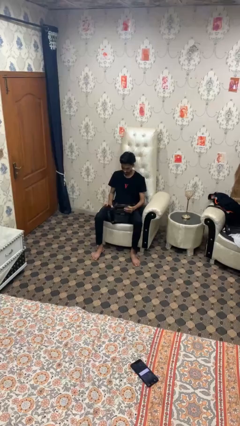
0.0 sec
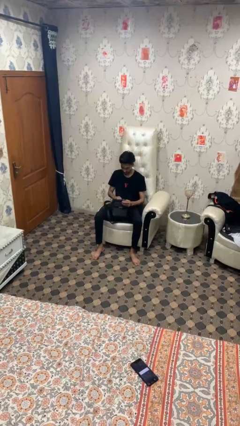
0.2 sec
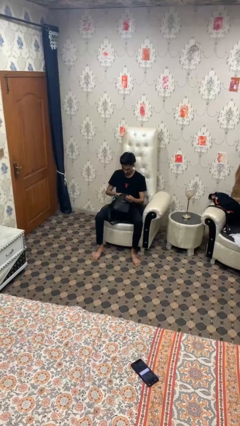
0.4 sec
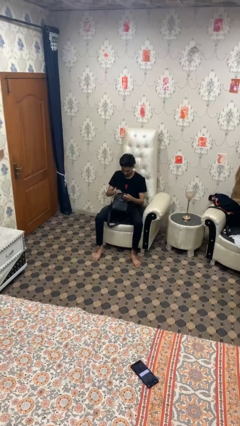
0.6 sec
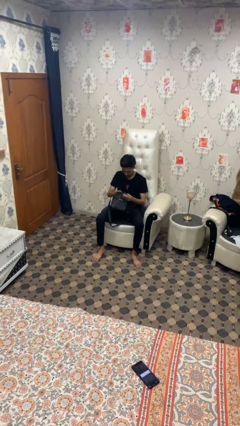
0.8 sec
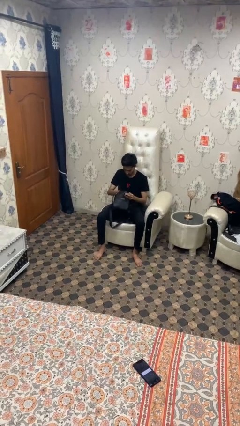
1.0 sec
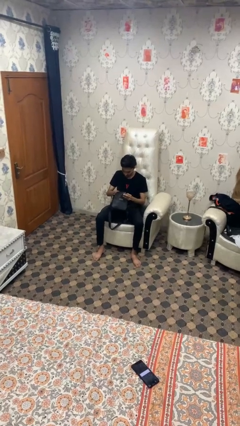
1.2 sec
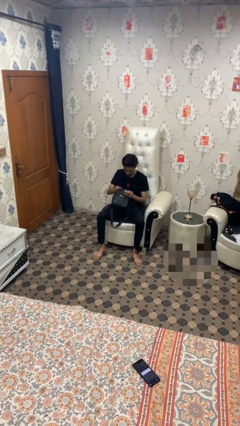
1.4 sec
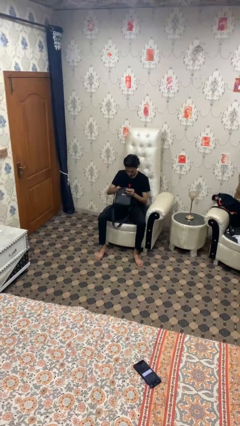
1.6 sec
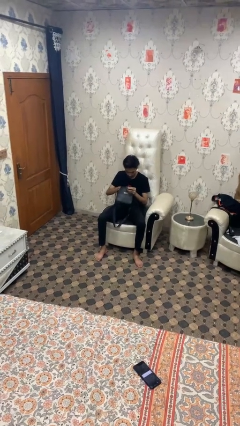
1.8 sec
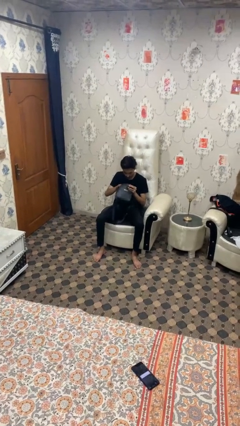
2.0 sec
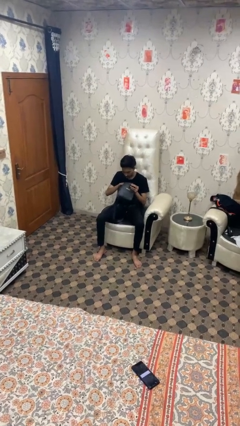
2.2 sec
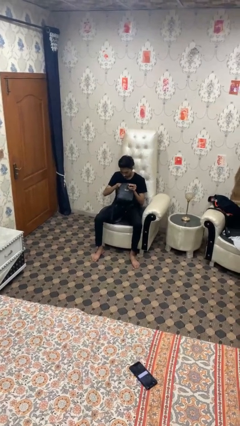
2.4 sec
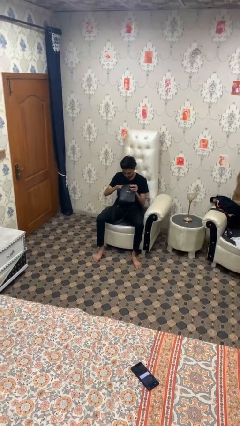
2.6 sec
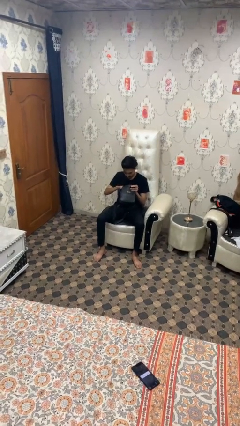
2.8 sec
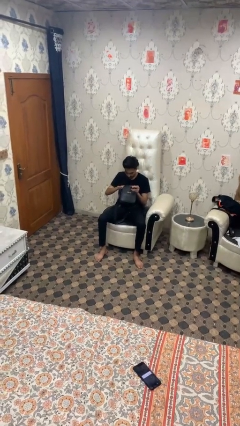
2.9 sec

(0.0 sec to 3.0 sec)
person searches in bag

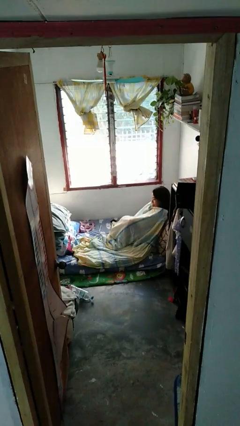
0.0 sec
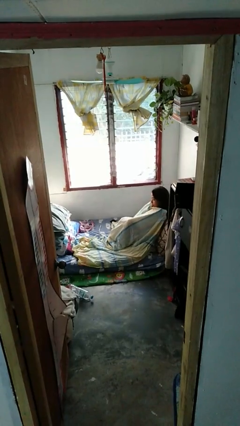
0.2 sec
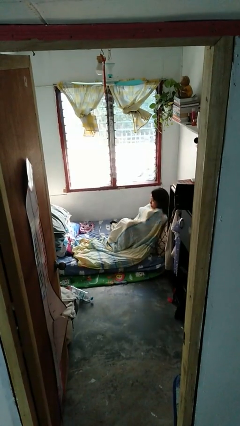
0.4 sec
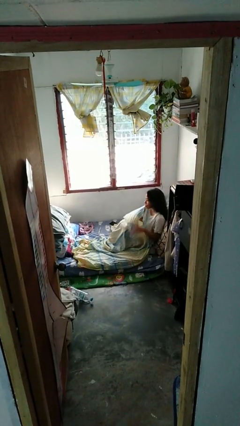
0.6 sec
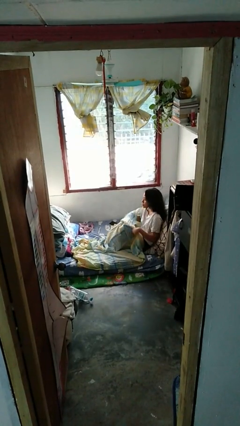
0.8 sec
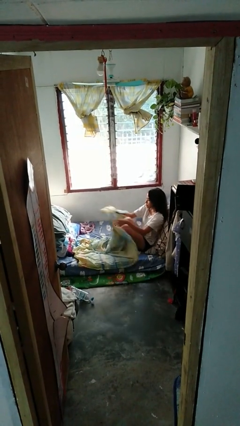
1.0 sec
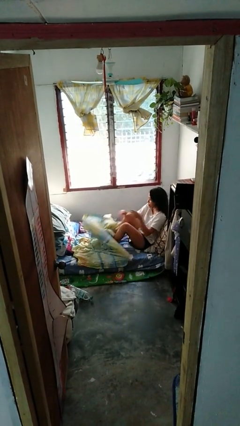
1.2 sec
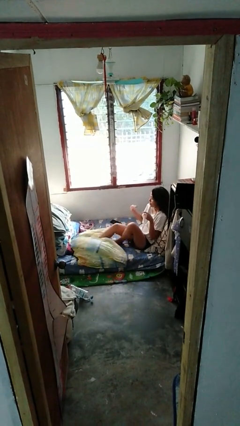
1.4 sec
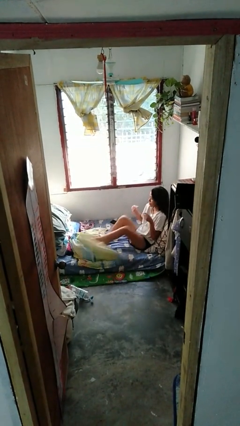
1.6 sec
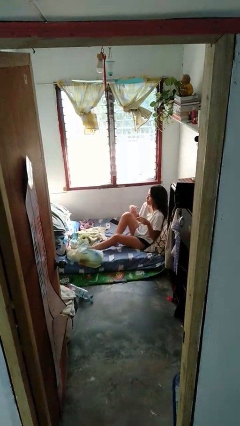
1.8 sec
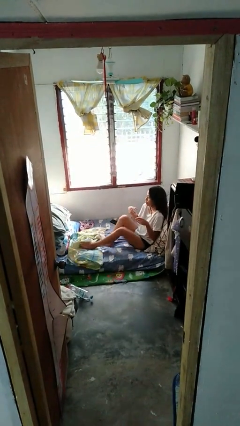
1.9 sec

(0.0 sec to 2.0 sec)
person uncovers with bedsheets

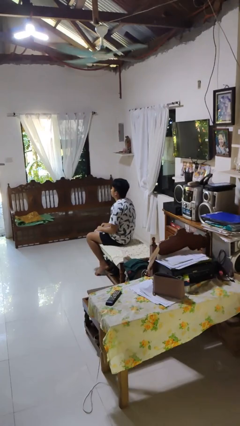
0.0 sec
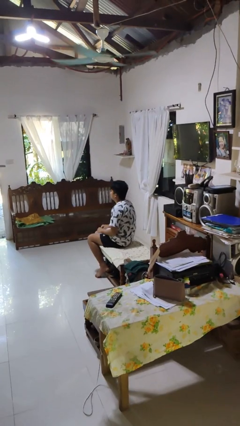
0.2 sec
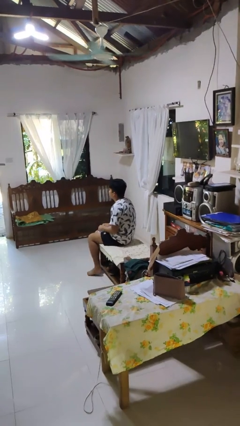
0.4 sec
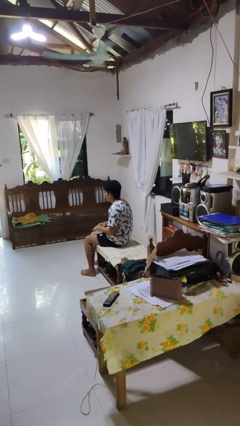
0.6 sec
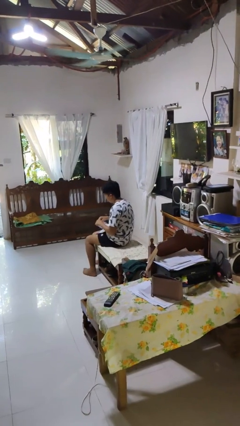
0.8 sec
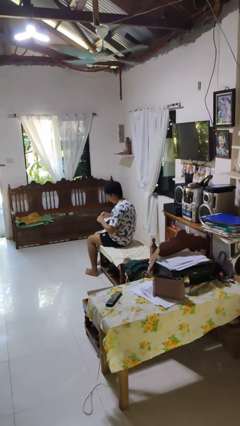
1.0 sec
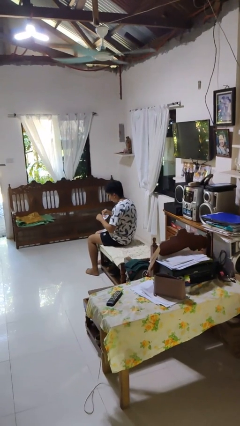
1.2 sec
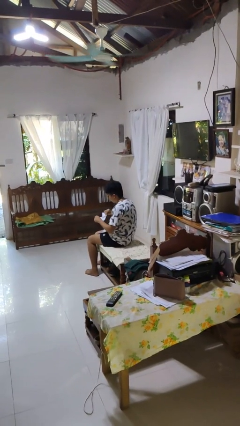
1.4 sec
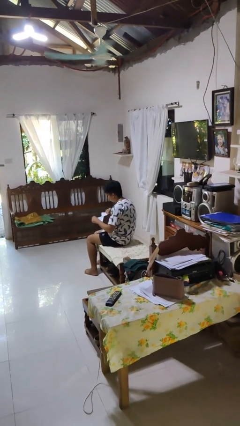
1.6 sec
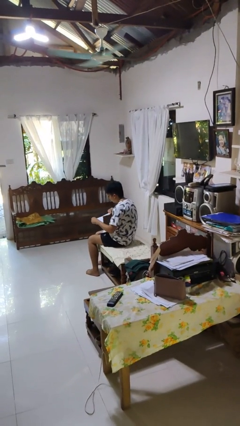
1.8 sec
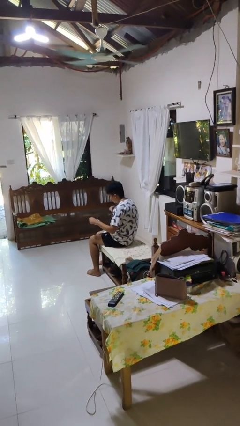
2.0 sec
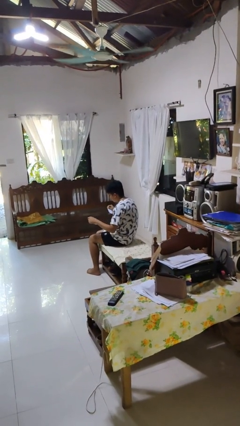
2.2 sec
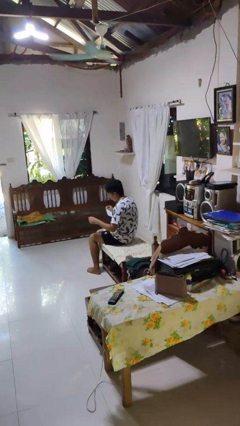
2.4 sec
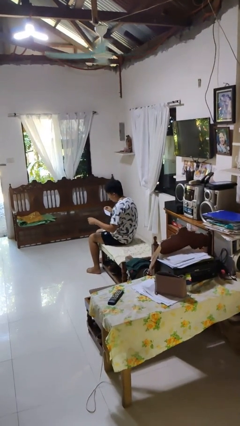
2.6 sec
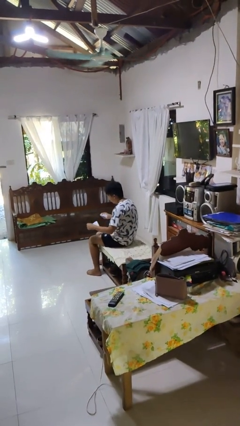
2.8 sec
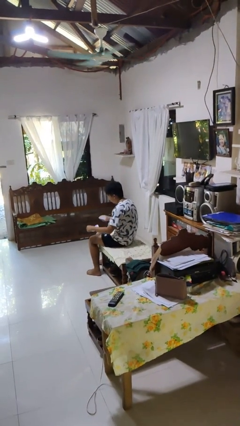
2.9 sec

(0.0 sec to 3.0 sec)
person tears paper

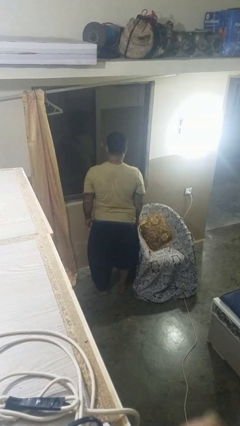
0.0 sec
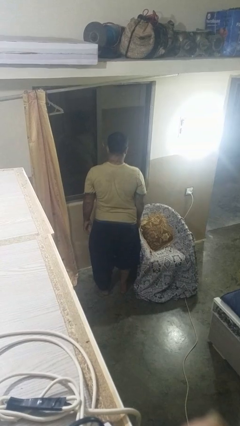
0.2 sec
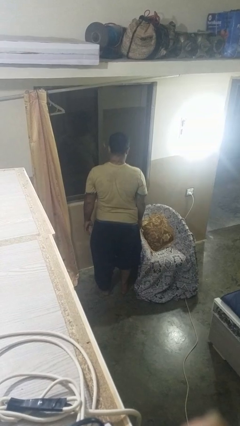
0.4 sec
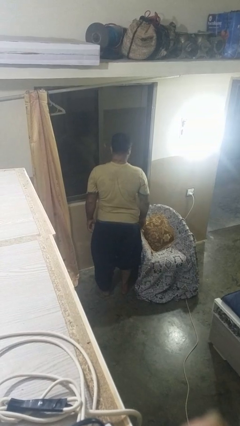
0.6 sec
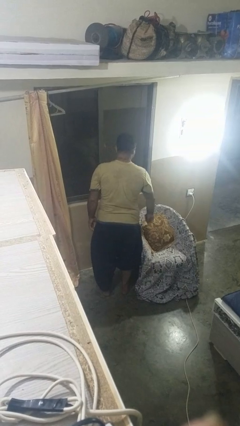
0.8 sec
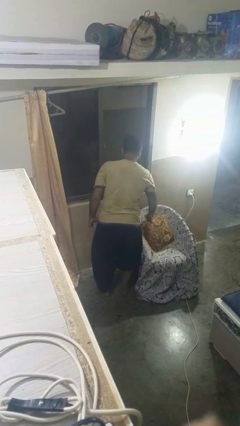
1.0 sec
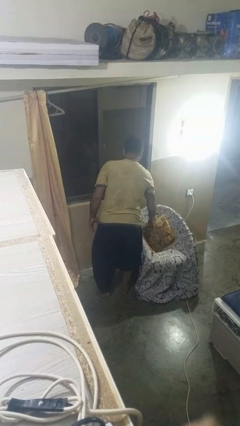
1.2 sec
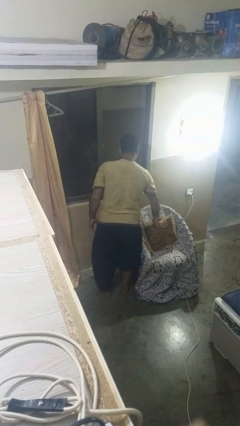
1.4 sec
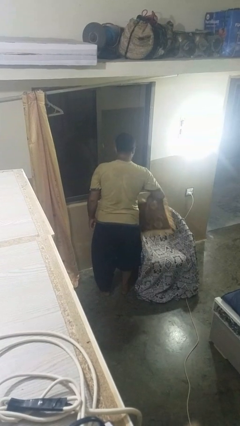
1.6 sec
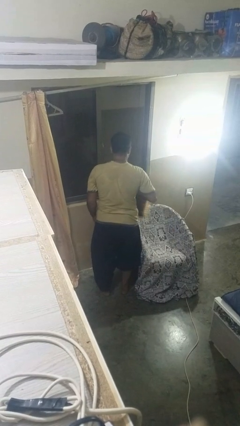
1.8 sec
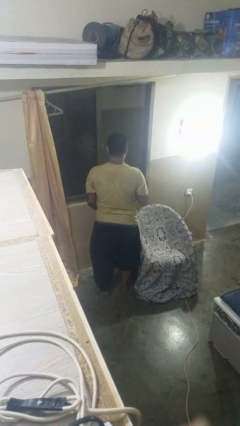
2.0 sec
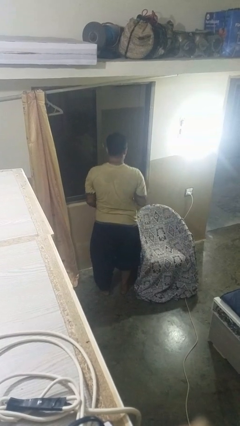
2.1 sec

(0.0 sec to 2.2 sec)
person picks up object from couch

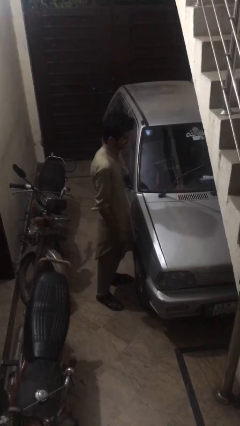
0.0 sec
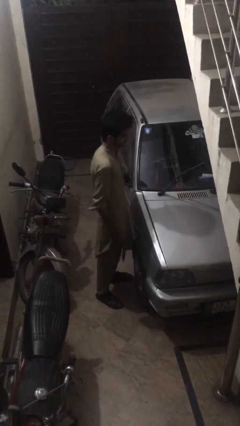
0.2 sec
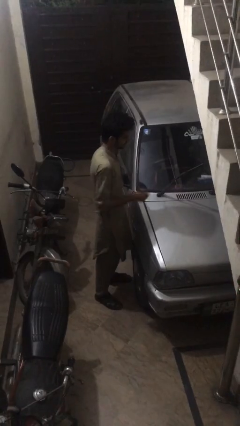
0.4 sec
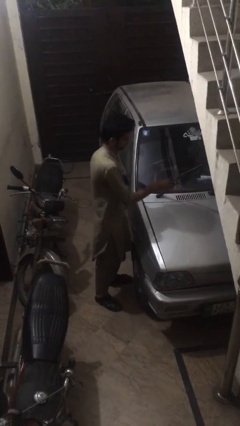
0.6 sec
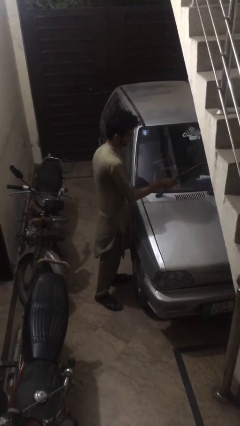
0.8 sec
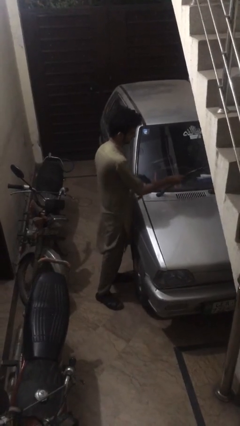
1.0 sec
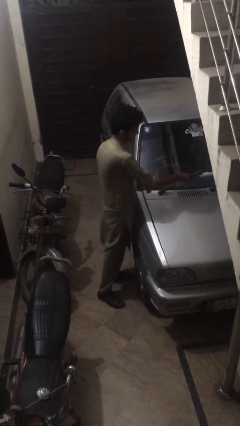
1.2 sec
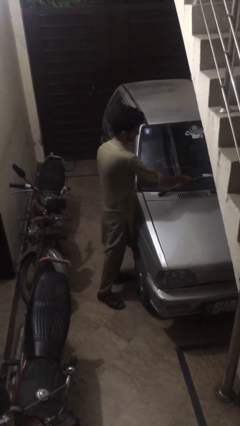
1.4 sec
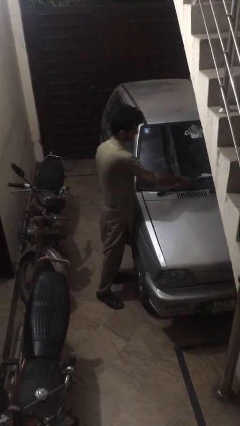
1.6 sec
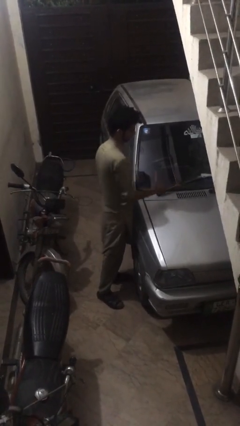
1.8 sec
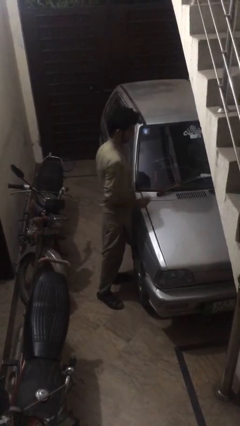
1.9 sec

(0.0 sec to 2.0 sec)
person flips down car wipers

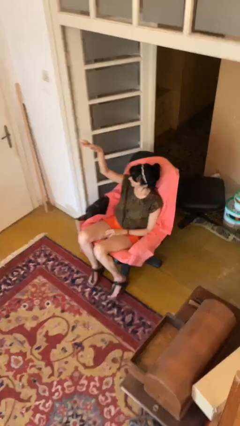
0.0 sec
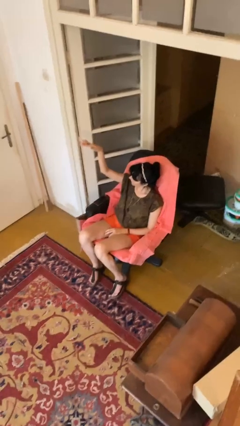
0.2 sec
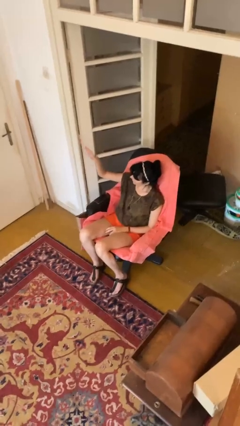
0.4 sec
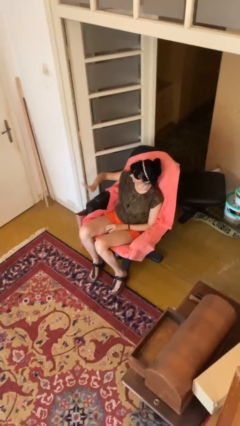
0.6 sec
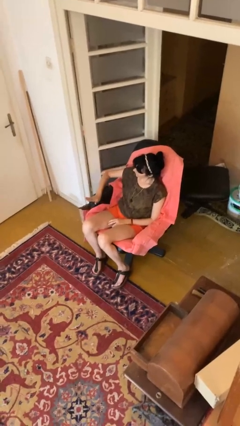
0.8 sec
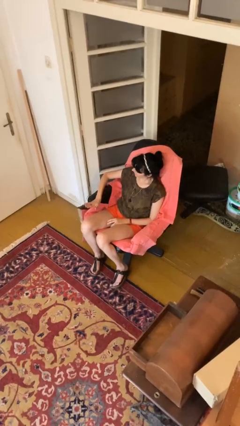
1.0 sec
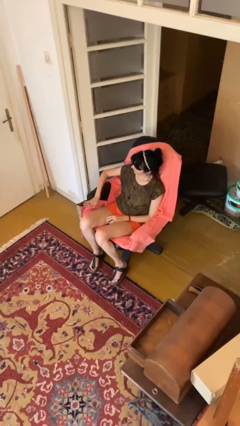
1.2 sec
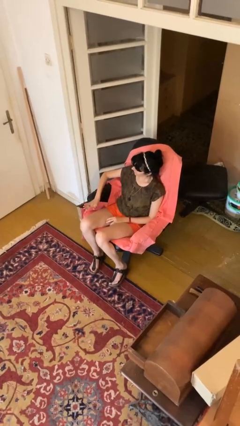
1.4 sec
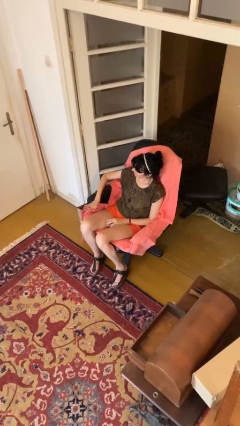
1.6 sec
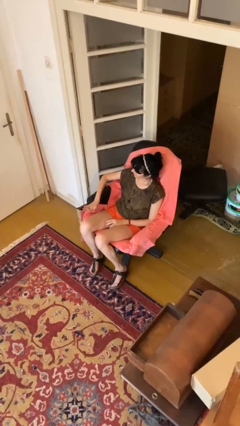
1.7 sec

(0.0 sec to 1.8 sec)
person gestures swipe down

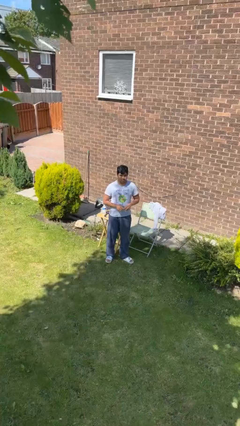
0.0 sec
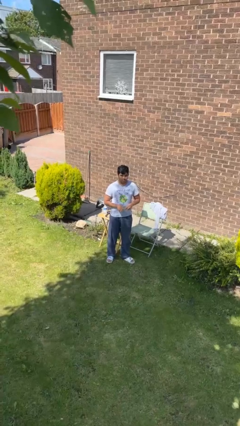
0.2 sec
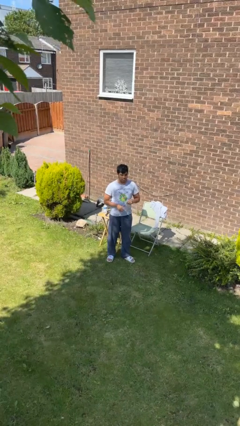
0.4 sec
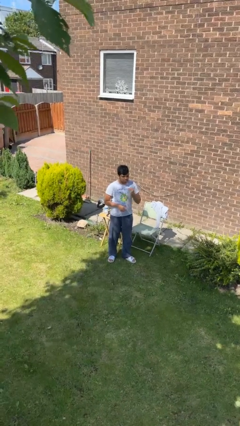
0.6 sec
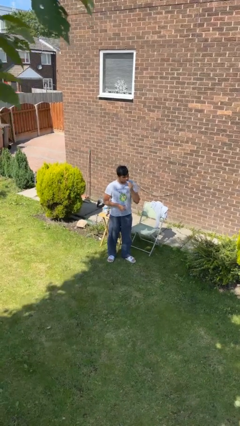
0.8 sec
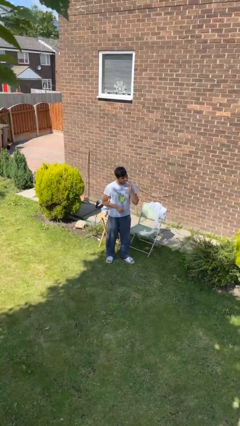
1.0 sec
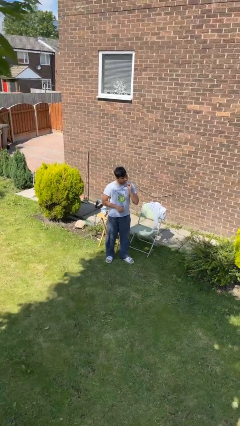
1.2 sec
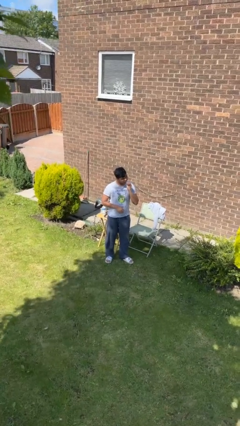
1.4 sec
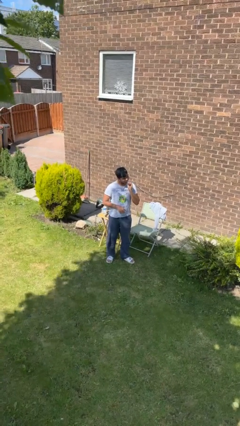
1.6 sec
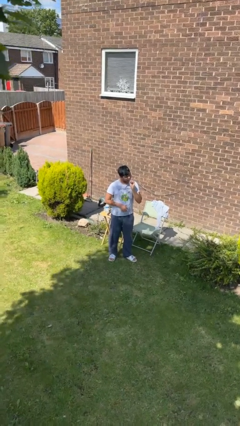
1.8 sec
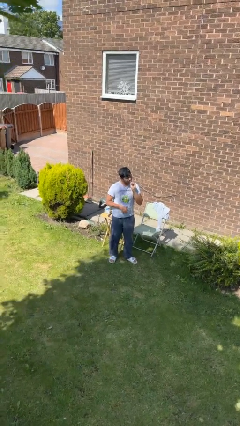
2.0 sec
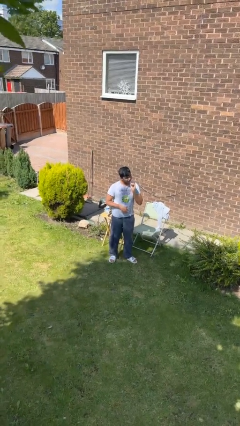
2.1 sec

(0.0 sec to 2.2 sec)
person flosses

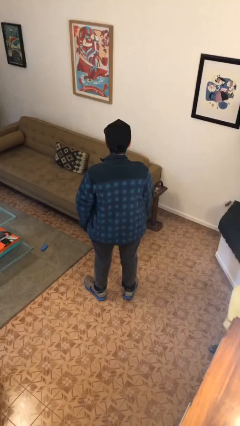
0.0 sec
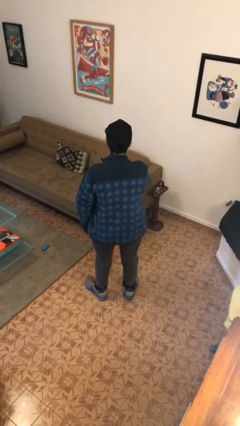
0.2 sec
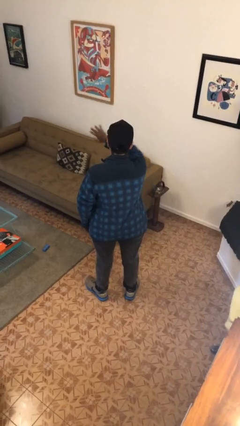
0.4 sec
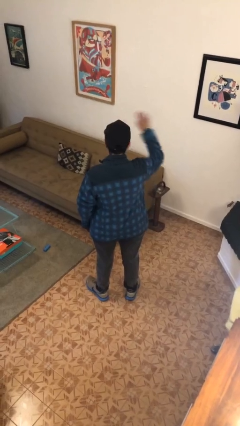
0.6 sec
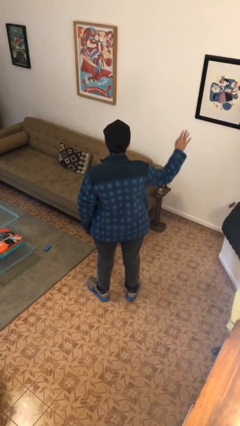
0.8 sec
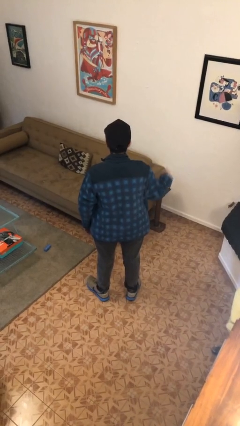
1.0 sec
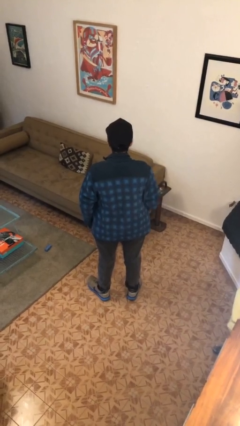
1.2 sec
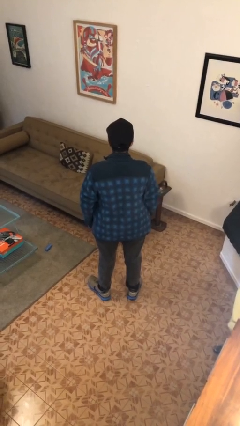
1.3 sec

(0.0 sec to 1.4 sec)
person gestures swipe right
